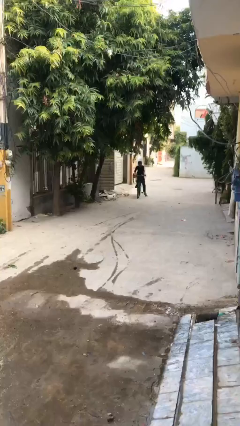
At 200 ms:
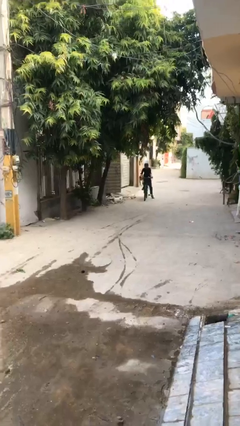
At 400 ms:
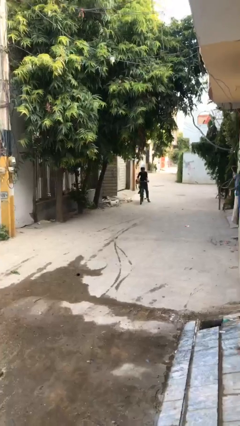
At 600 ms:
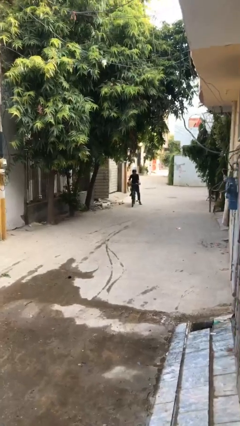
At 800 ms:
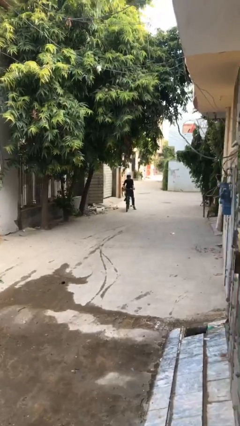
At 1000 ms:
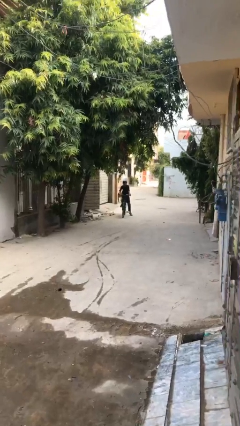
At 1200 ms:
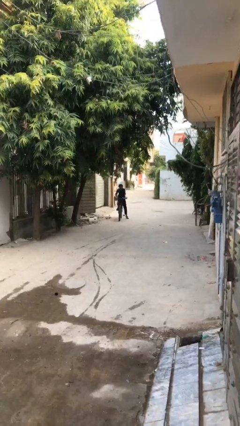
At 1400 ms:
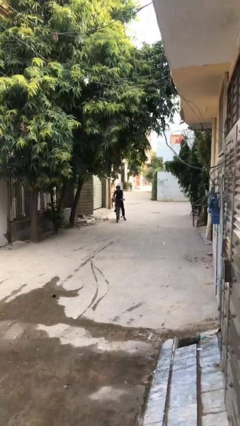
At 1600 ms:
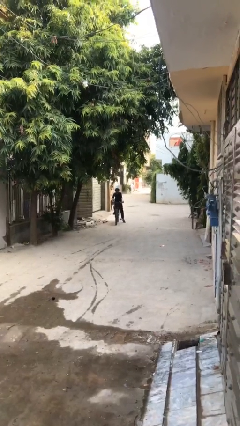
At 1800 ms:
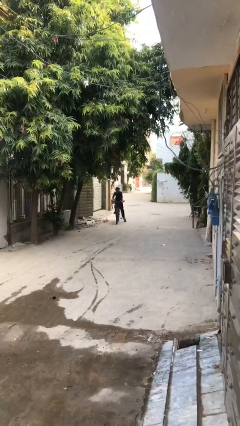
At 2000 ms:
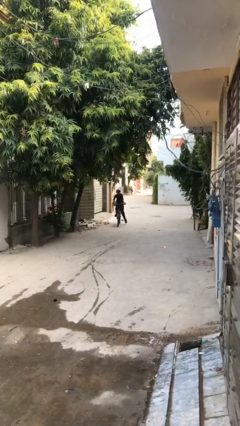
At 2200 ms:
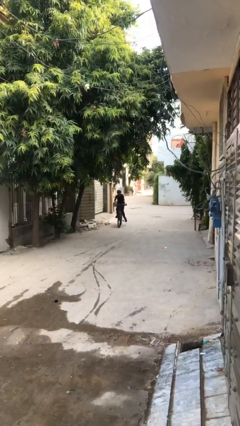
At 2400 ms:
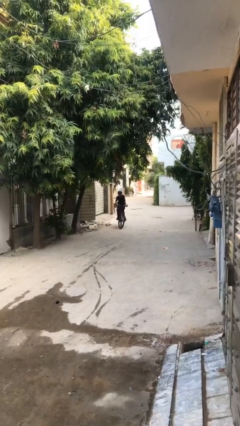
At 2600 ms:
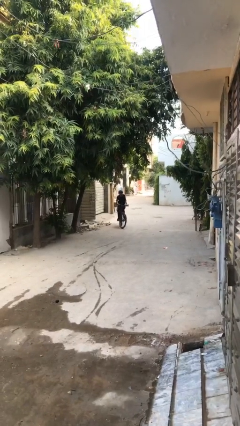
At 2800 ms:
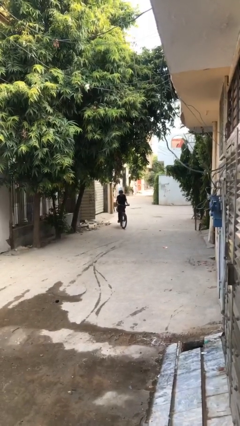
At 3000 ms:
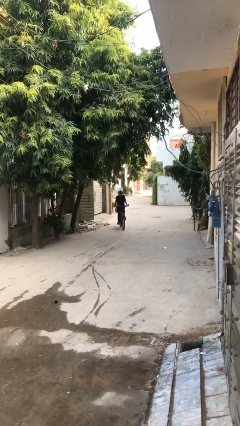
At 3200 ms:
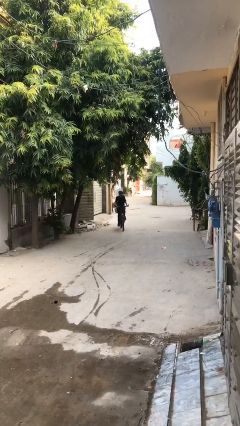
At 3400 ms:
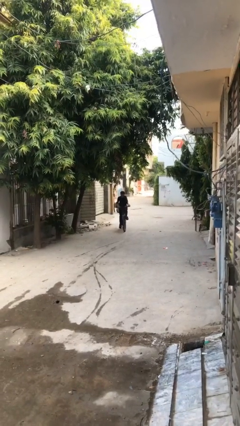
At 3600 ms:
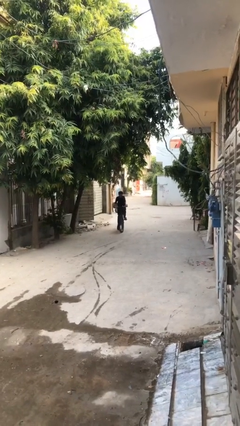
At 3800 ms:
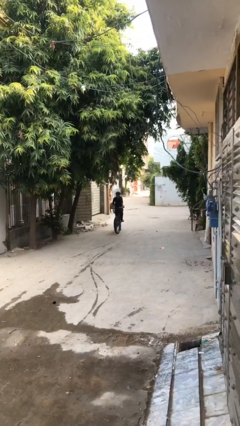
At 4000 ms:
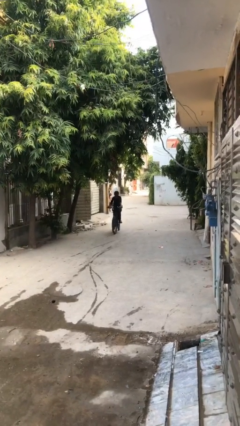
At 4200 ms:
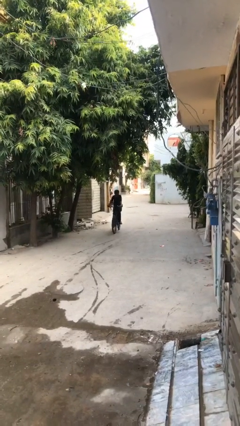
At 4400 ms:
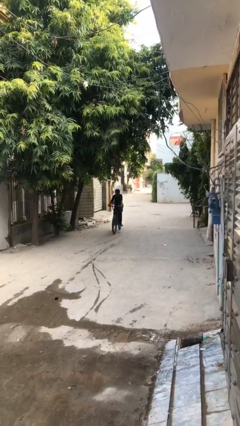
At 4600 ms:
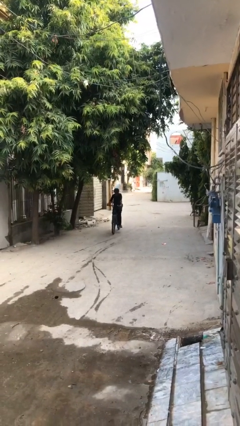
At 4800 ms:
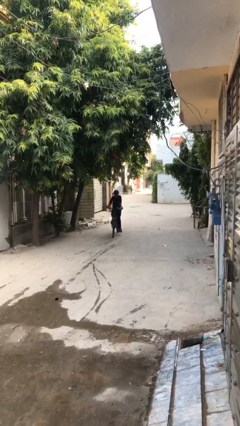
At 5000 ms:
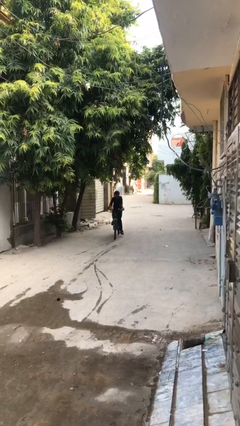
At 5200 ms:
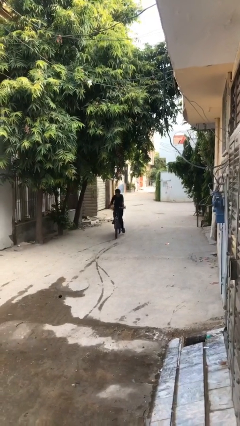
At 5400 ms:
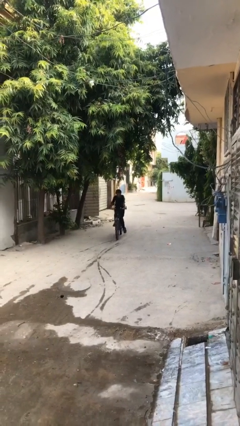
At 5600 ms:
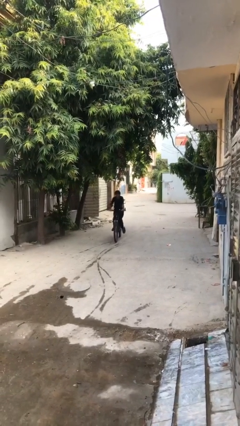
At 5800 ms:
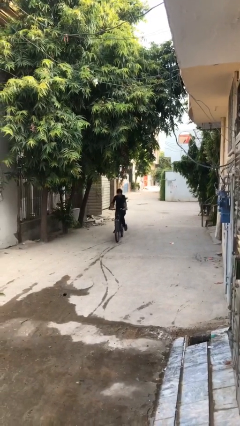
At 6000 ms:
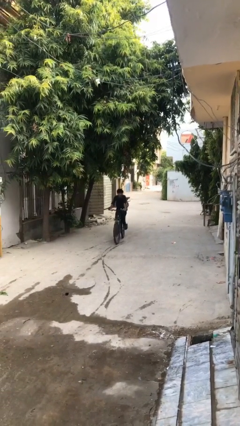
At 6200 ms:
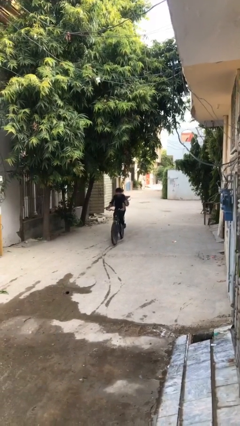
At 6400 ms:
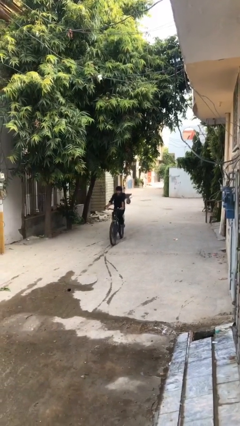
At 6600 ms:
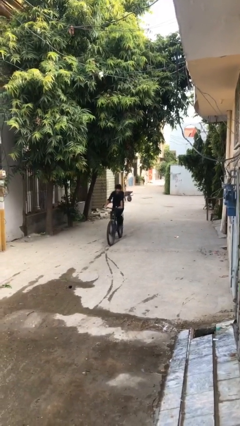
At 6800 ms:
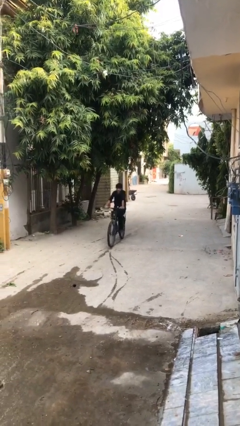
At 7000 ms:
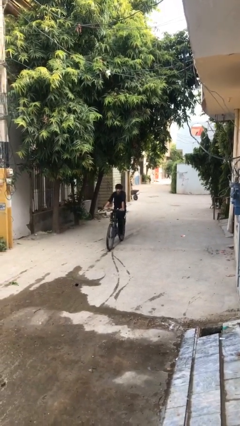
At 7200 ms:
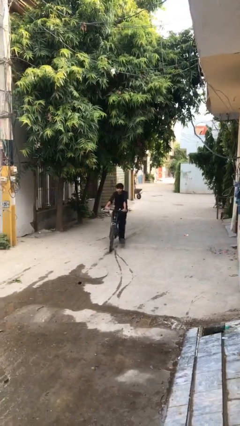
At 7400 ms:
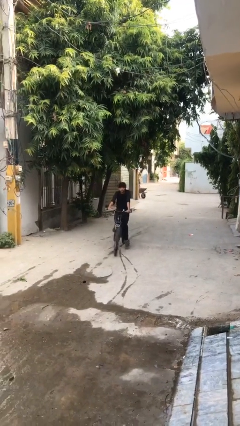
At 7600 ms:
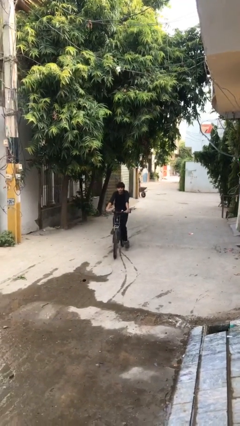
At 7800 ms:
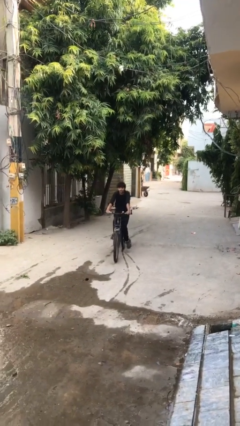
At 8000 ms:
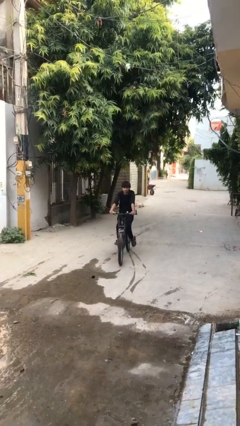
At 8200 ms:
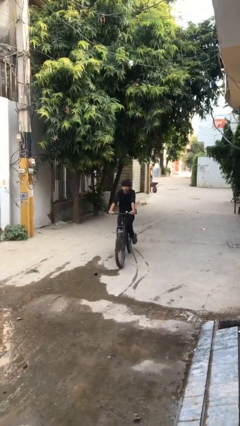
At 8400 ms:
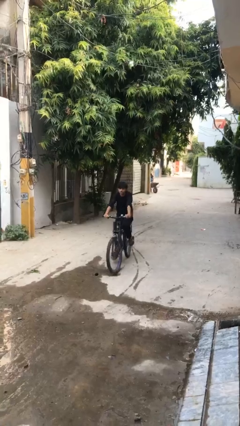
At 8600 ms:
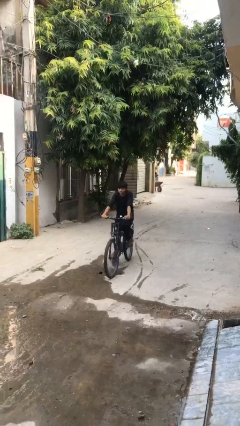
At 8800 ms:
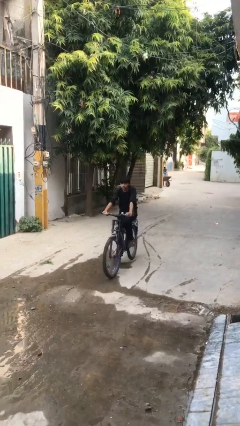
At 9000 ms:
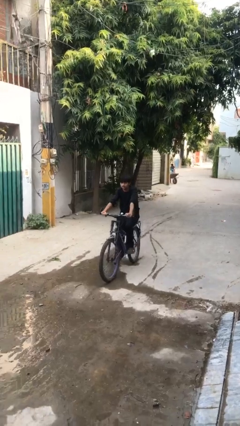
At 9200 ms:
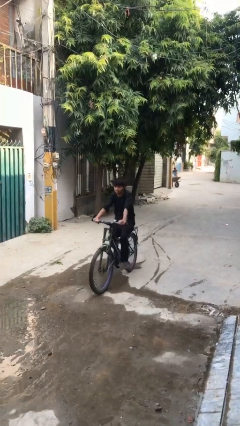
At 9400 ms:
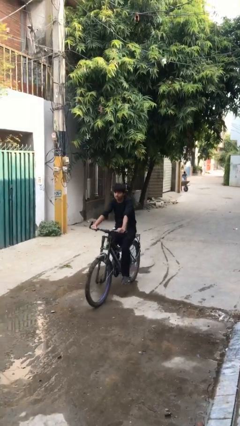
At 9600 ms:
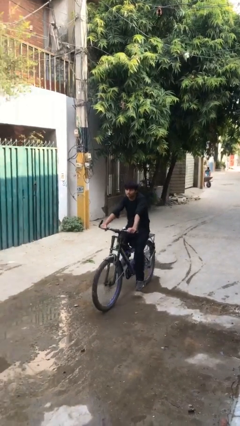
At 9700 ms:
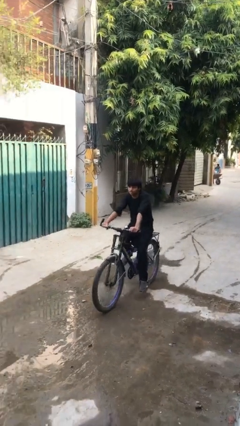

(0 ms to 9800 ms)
person rides bicycle

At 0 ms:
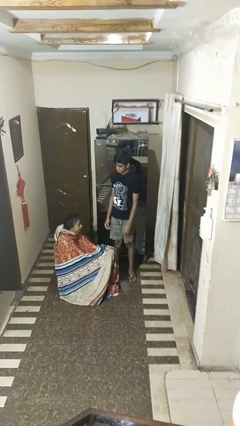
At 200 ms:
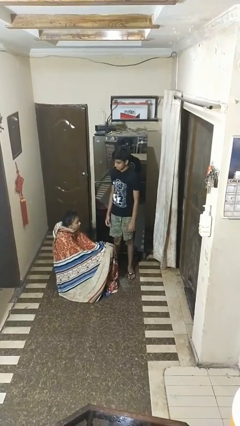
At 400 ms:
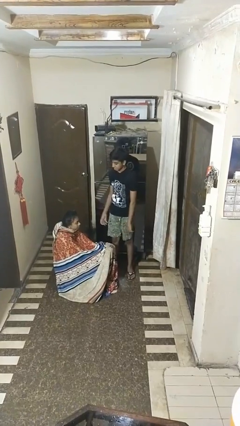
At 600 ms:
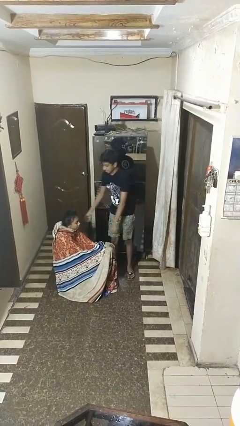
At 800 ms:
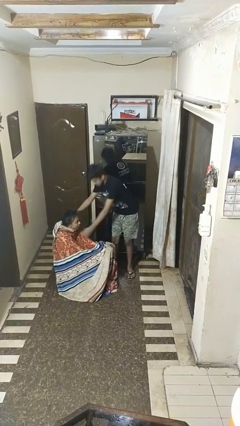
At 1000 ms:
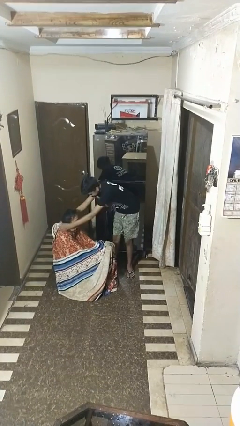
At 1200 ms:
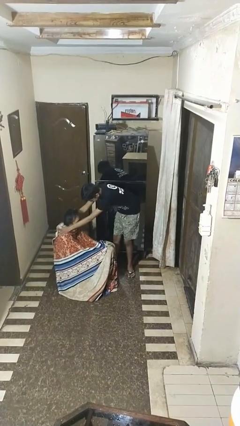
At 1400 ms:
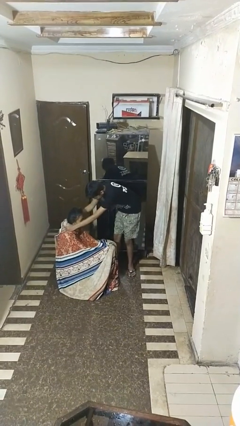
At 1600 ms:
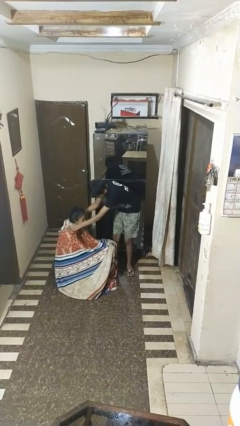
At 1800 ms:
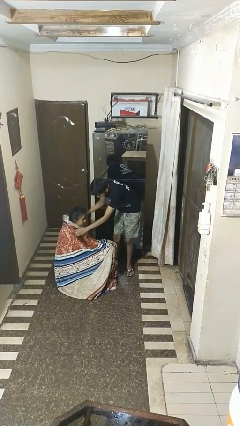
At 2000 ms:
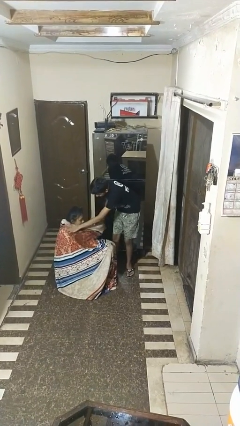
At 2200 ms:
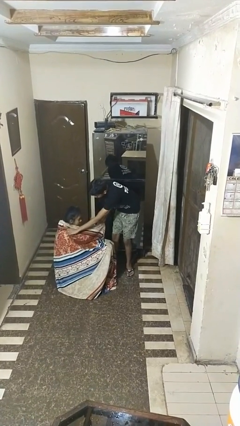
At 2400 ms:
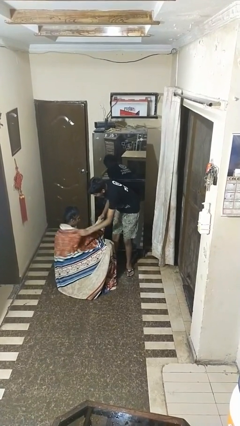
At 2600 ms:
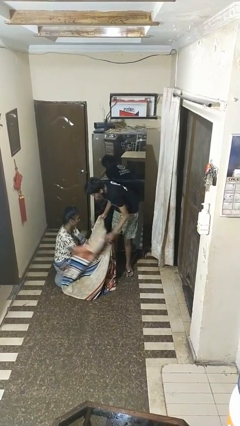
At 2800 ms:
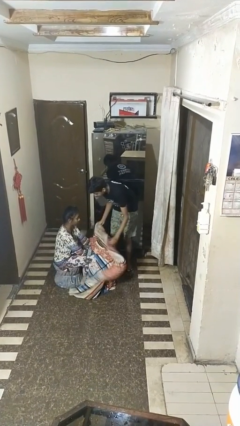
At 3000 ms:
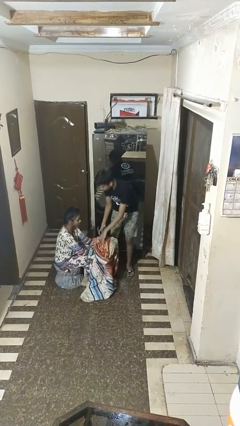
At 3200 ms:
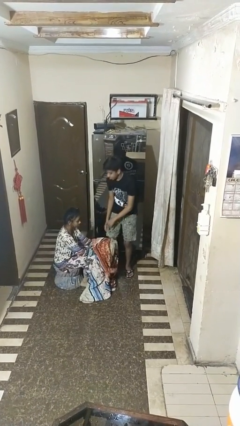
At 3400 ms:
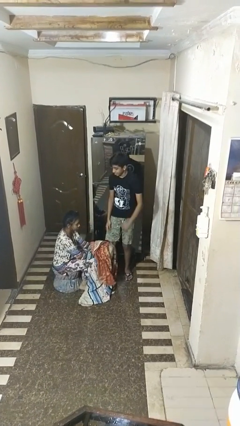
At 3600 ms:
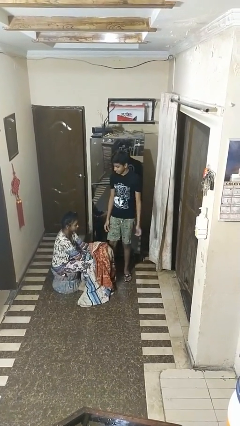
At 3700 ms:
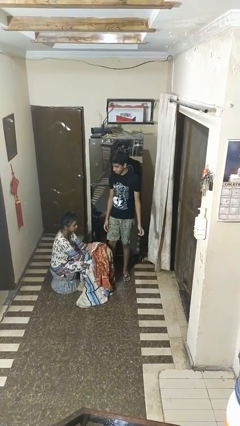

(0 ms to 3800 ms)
person uncovers friend with blanket

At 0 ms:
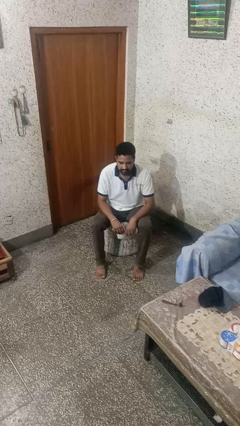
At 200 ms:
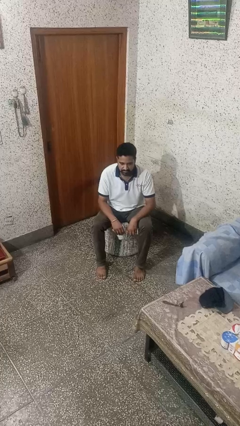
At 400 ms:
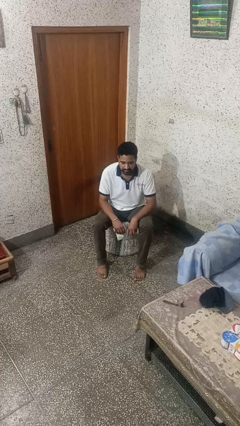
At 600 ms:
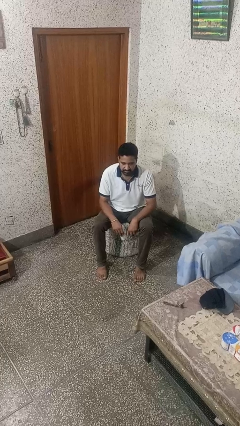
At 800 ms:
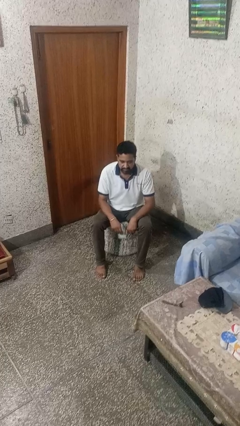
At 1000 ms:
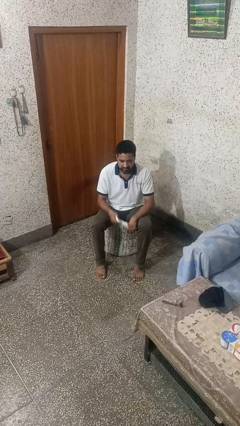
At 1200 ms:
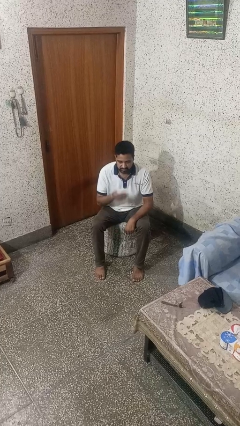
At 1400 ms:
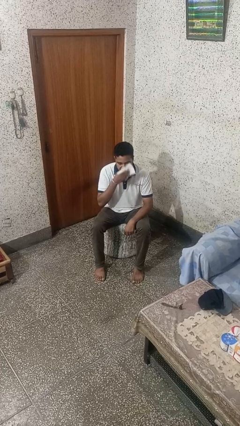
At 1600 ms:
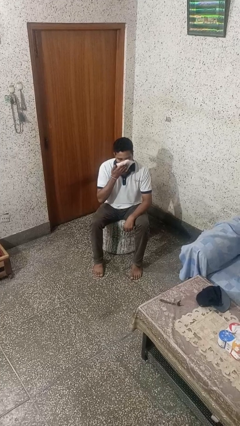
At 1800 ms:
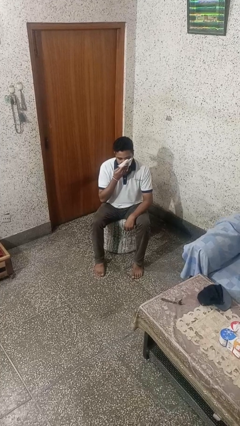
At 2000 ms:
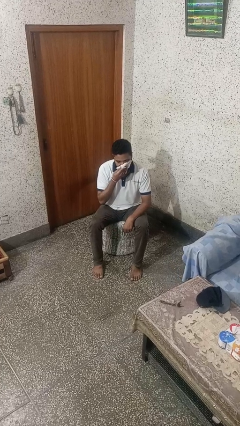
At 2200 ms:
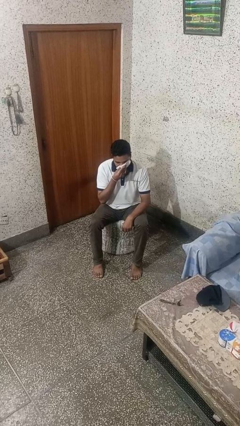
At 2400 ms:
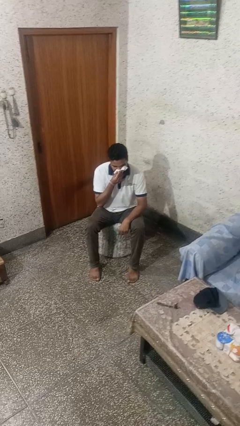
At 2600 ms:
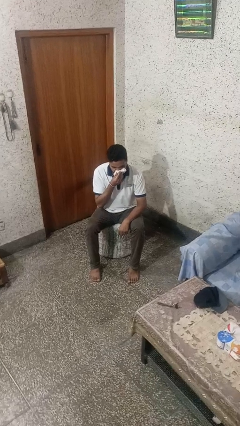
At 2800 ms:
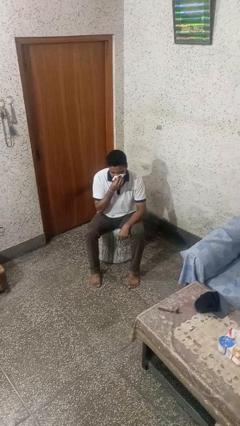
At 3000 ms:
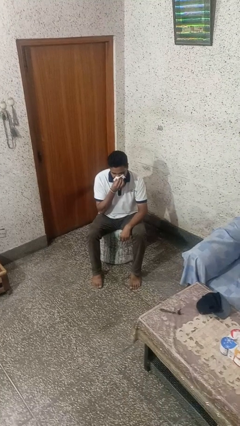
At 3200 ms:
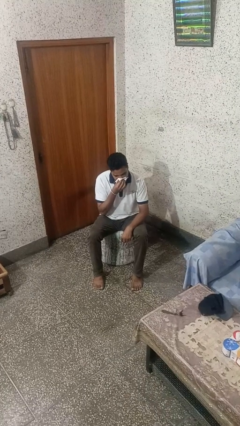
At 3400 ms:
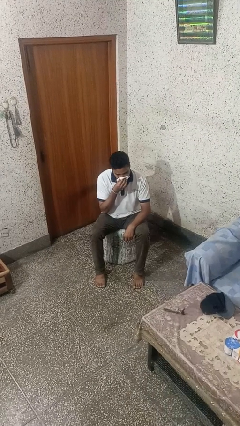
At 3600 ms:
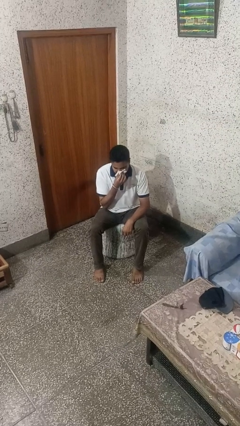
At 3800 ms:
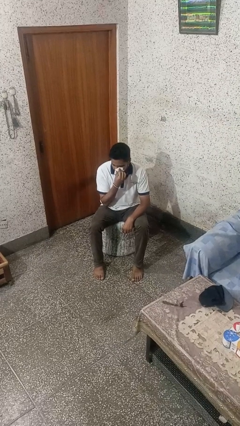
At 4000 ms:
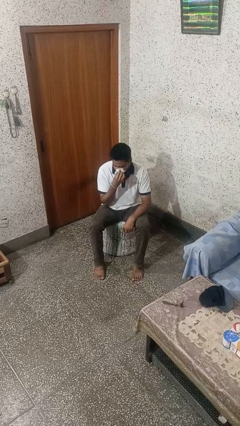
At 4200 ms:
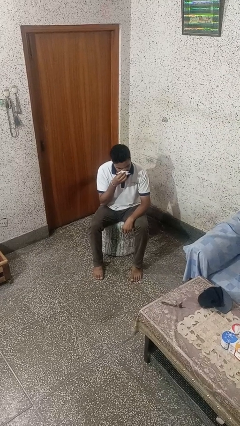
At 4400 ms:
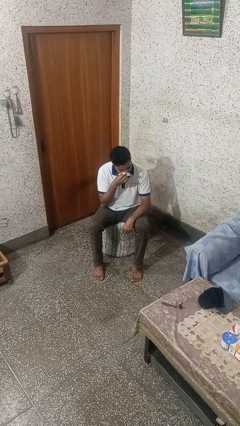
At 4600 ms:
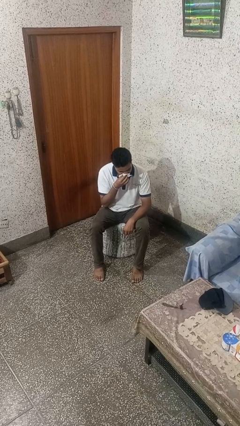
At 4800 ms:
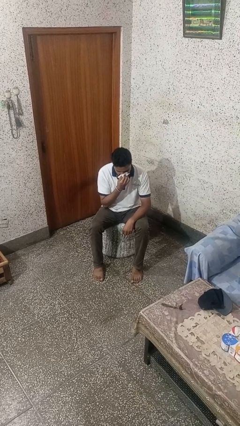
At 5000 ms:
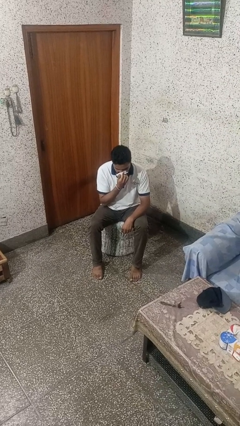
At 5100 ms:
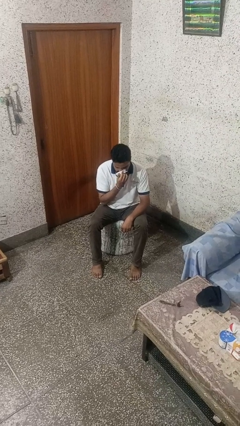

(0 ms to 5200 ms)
person blows nose
